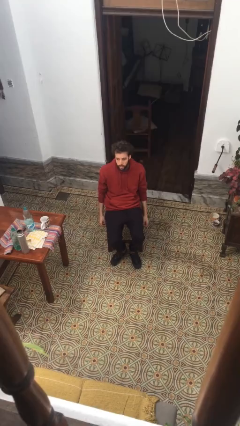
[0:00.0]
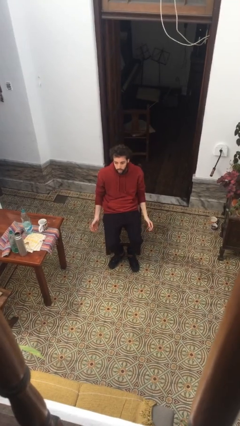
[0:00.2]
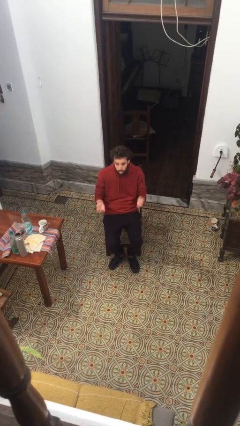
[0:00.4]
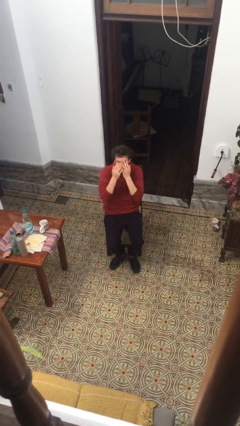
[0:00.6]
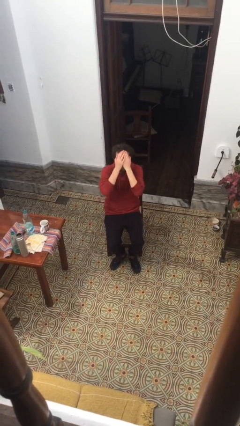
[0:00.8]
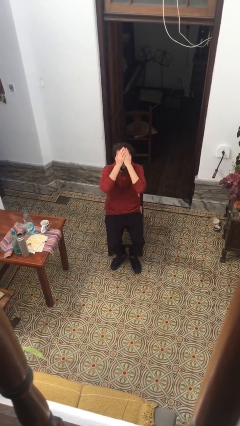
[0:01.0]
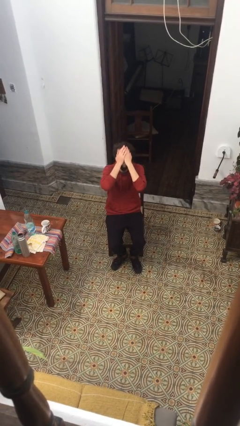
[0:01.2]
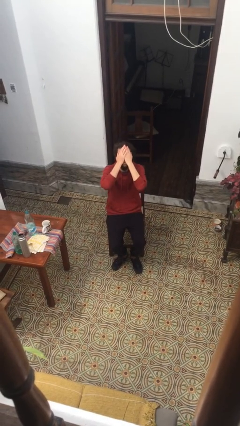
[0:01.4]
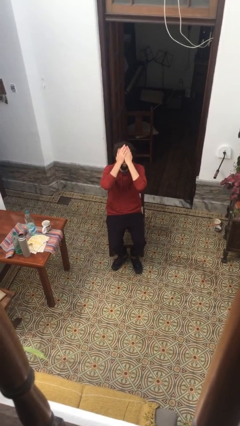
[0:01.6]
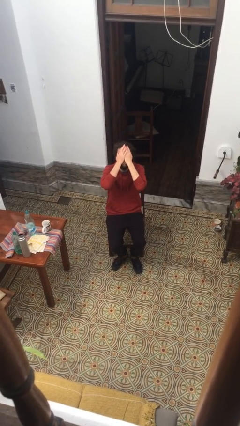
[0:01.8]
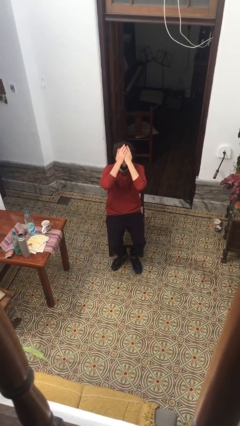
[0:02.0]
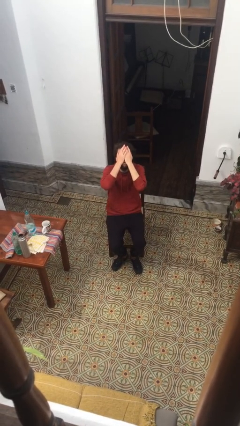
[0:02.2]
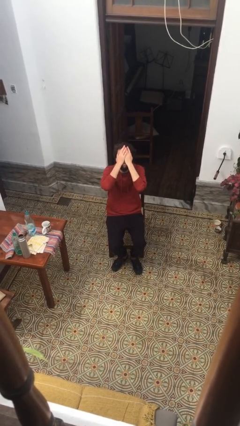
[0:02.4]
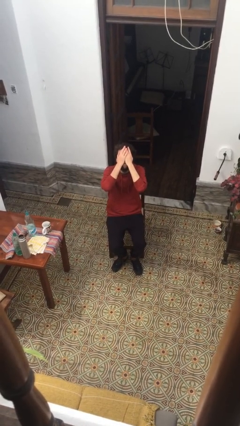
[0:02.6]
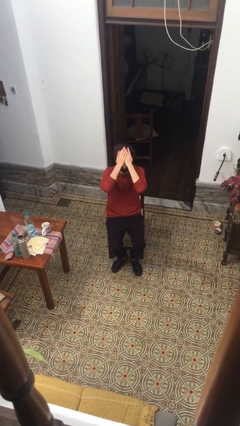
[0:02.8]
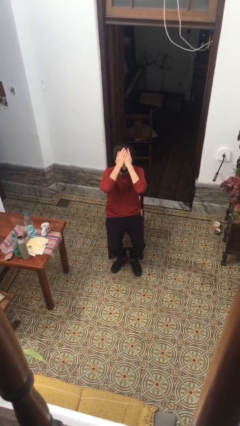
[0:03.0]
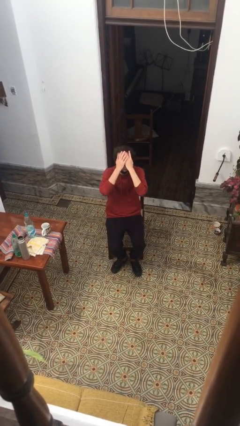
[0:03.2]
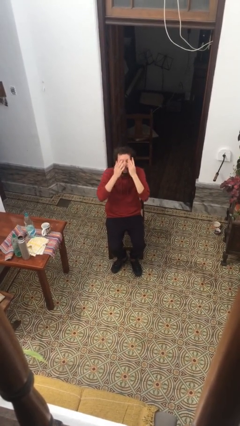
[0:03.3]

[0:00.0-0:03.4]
person covers face with hands

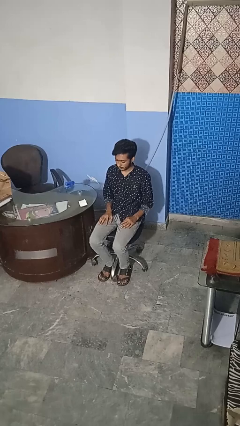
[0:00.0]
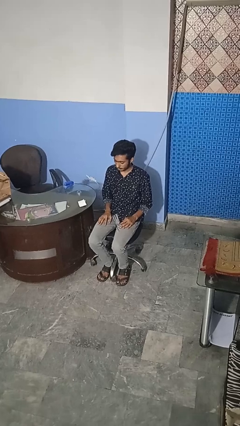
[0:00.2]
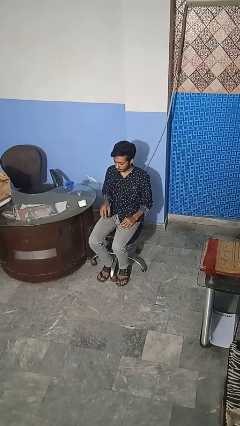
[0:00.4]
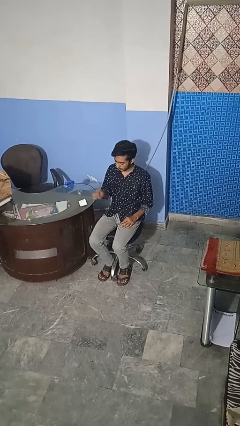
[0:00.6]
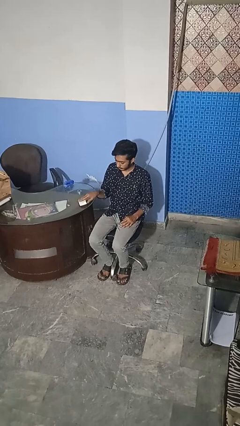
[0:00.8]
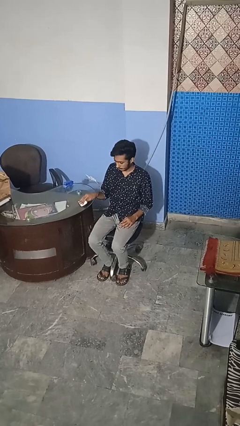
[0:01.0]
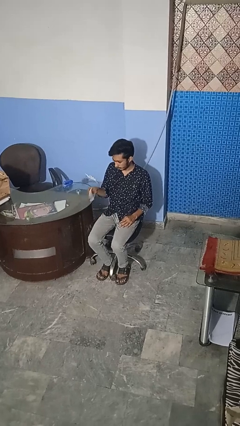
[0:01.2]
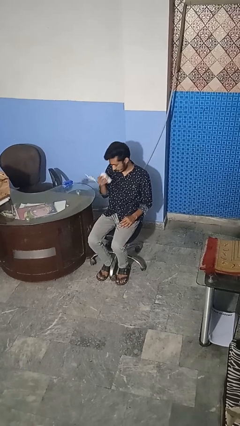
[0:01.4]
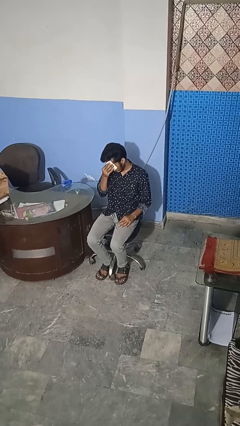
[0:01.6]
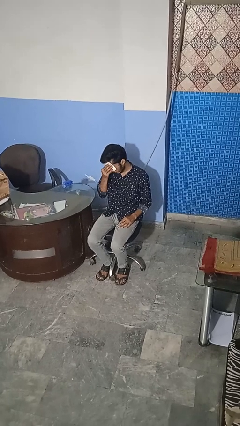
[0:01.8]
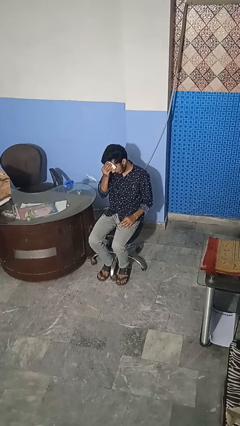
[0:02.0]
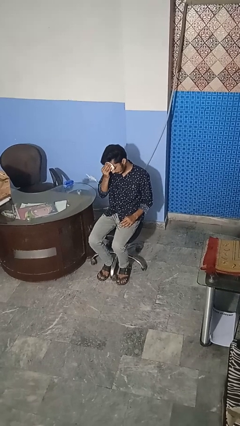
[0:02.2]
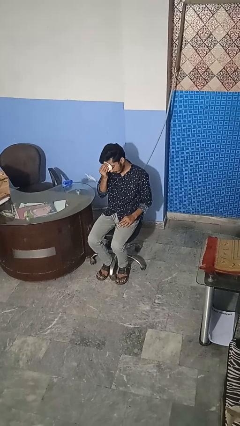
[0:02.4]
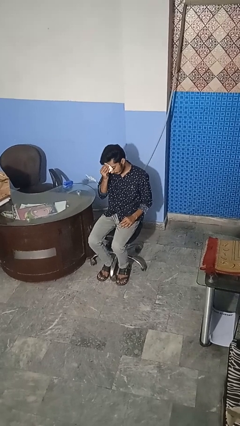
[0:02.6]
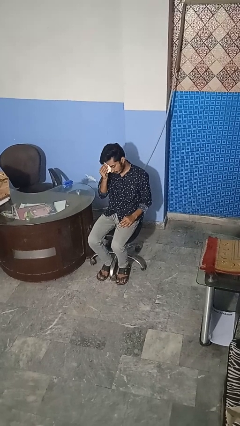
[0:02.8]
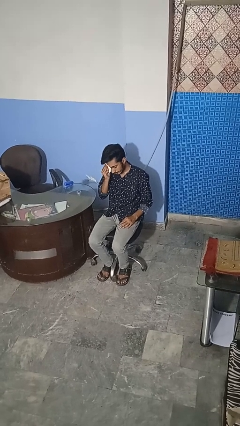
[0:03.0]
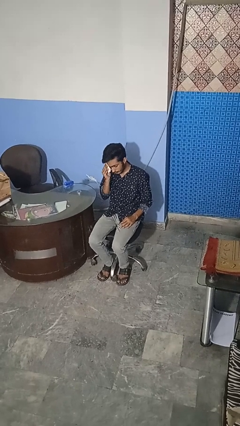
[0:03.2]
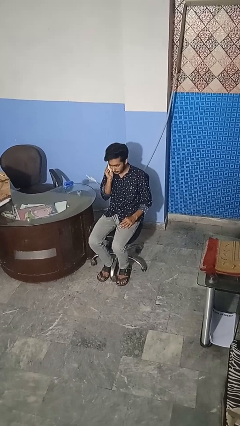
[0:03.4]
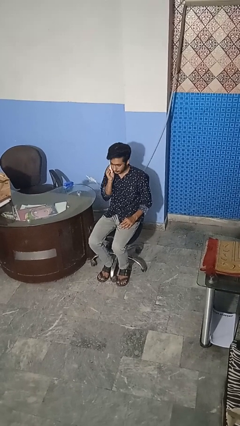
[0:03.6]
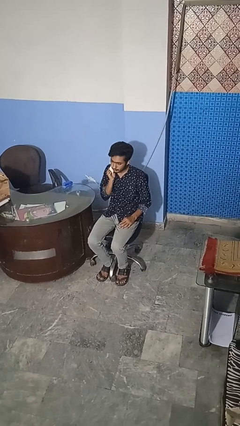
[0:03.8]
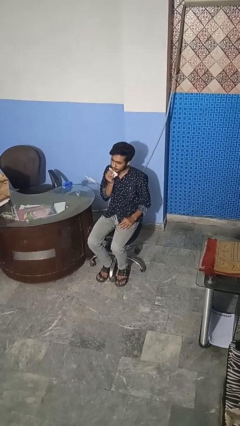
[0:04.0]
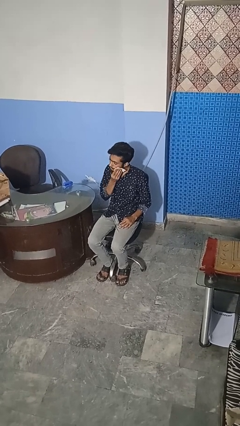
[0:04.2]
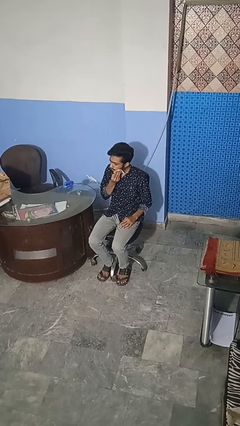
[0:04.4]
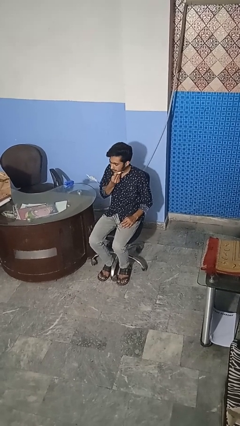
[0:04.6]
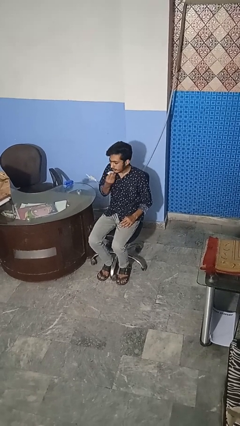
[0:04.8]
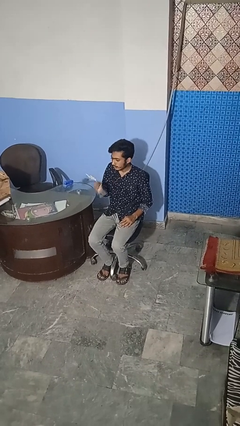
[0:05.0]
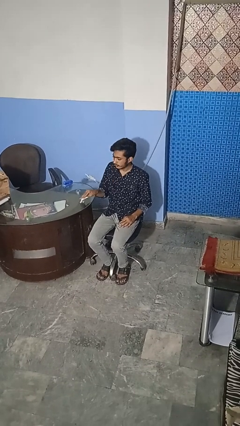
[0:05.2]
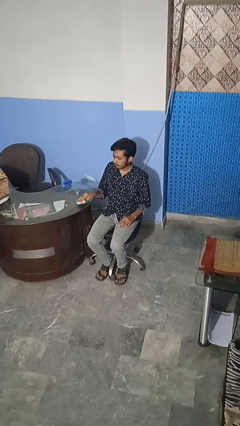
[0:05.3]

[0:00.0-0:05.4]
person wipes mouth with napkin

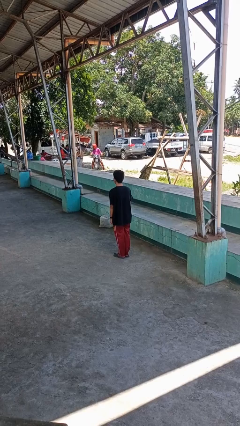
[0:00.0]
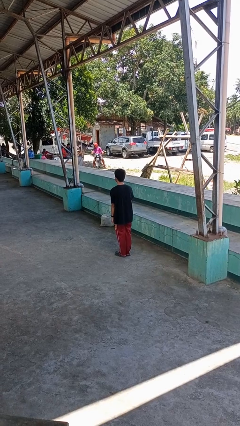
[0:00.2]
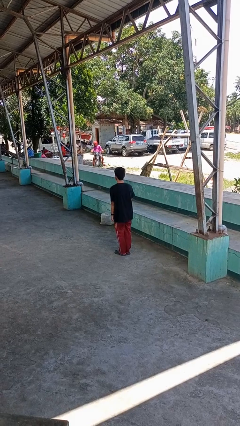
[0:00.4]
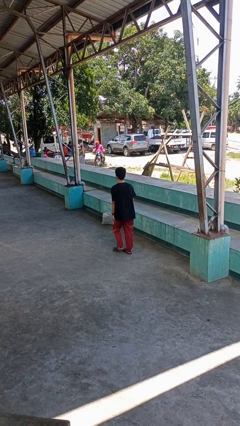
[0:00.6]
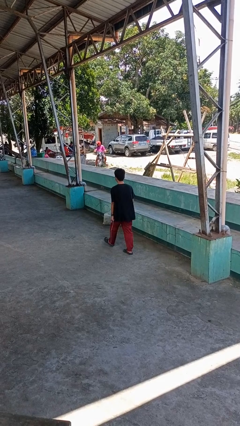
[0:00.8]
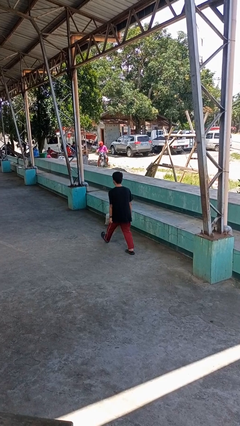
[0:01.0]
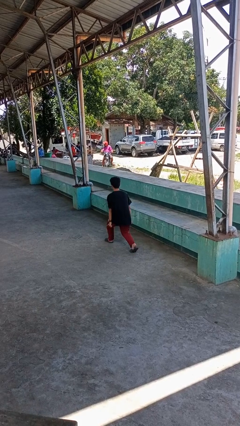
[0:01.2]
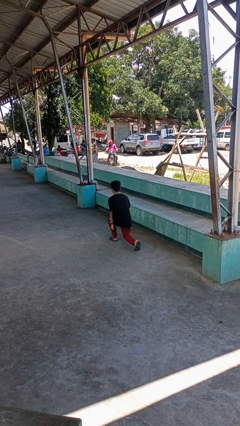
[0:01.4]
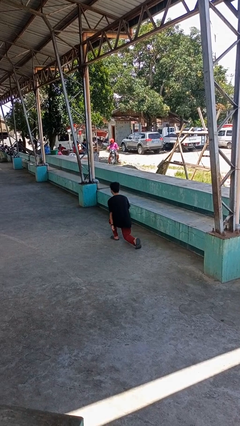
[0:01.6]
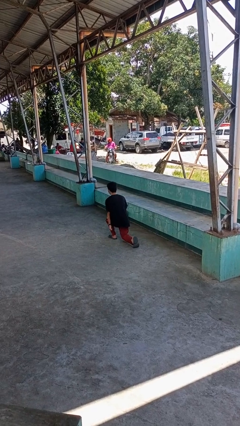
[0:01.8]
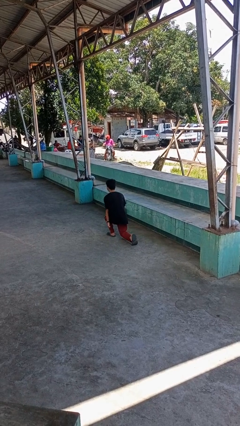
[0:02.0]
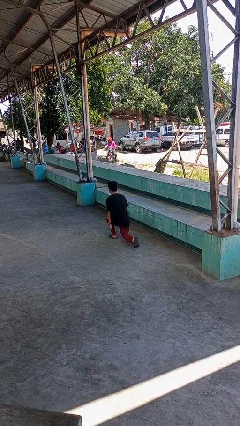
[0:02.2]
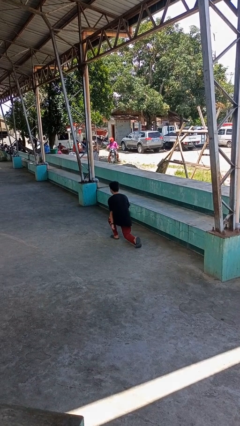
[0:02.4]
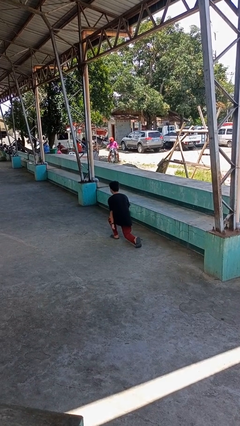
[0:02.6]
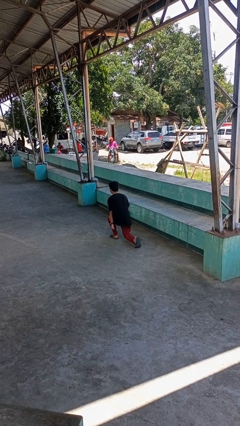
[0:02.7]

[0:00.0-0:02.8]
person exercises with lunges

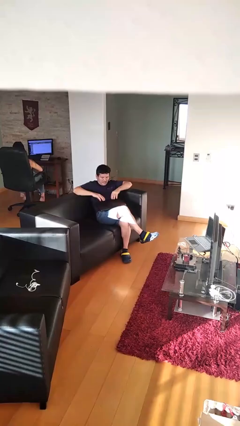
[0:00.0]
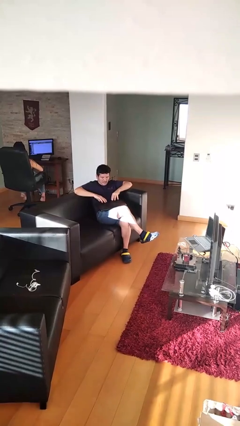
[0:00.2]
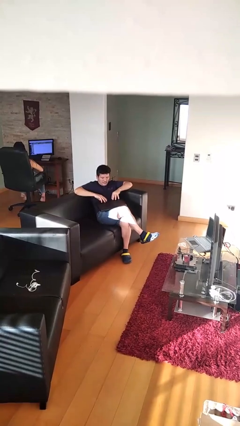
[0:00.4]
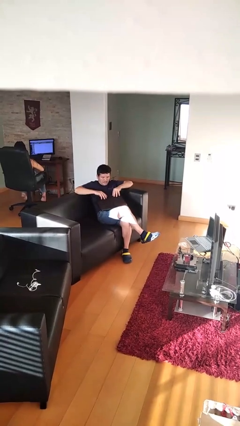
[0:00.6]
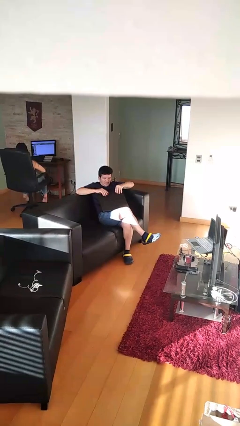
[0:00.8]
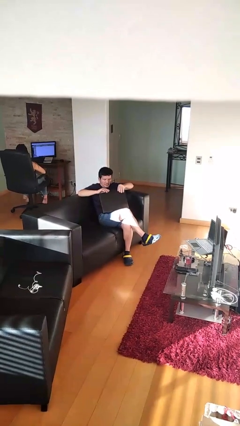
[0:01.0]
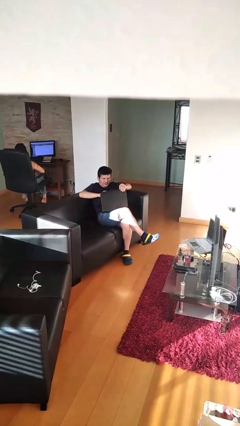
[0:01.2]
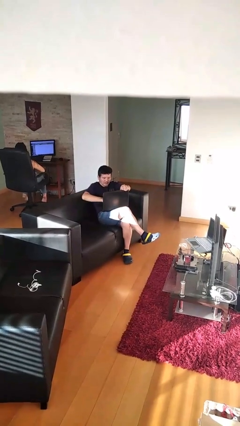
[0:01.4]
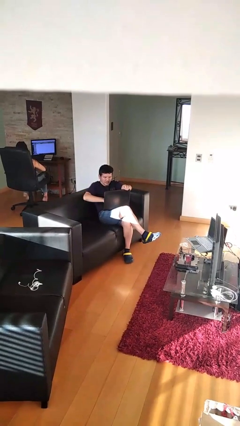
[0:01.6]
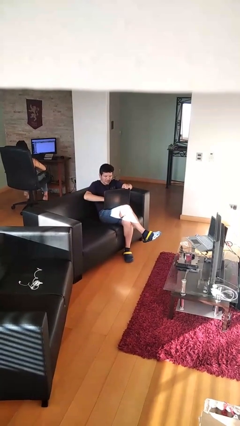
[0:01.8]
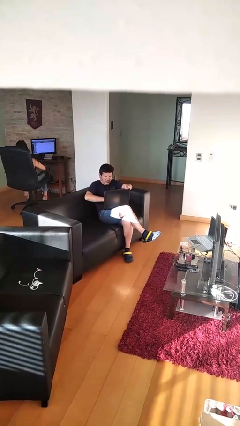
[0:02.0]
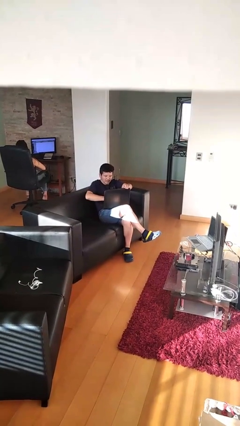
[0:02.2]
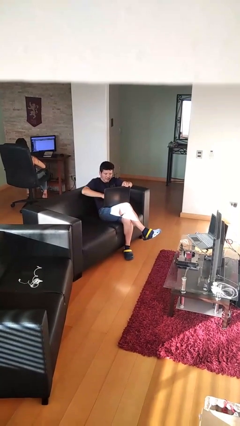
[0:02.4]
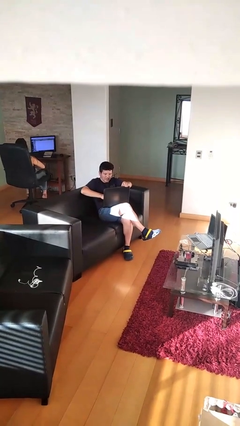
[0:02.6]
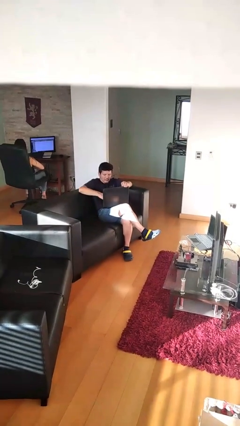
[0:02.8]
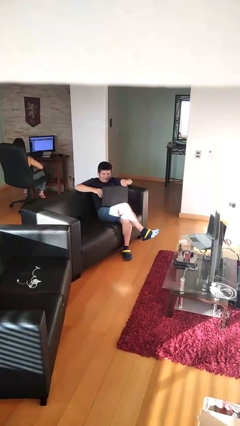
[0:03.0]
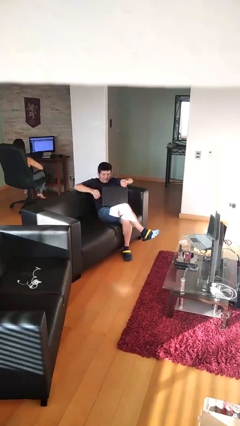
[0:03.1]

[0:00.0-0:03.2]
person interacts with laptop

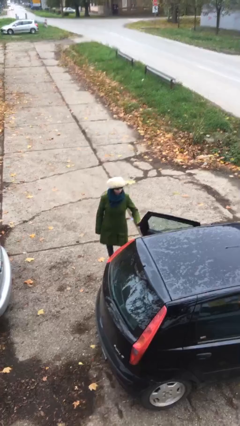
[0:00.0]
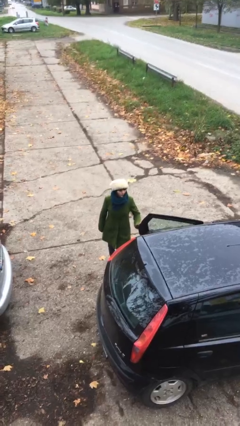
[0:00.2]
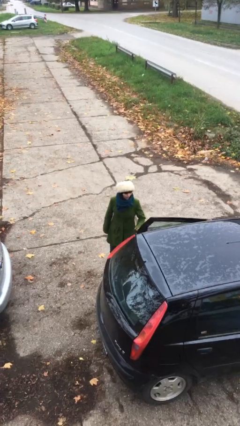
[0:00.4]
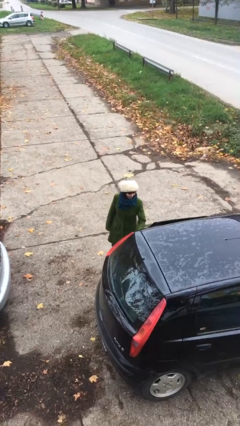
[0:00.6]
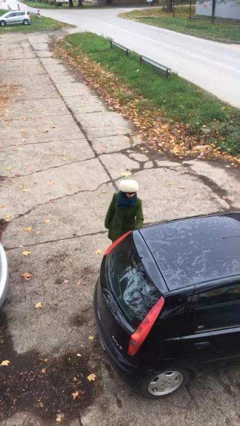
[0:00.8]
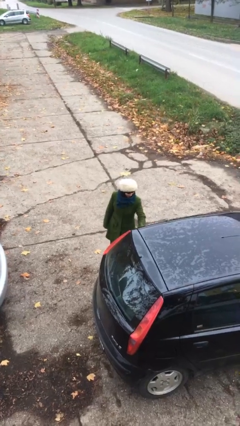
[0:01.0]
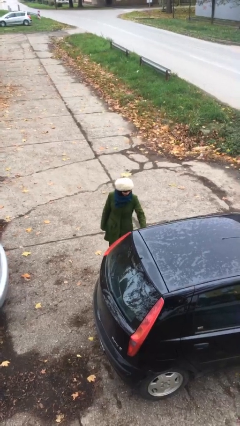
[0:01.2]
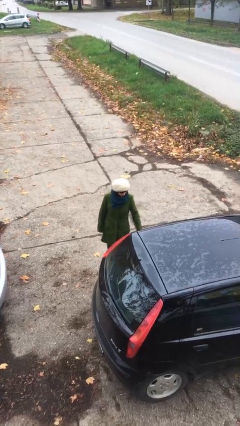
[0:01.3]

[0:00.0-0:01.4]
person closes car door

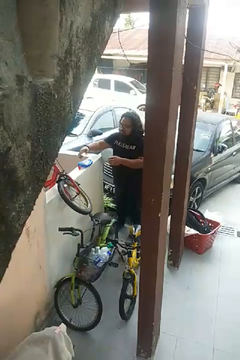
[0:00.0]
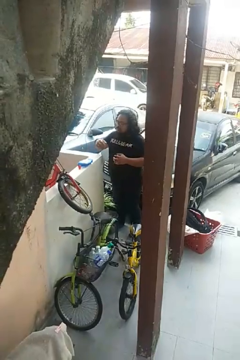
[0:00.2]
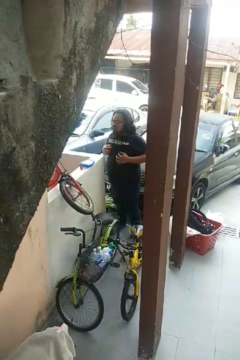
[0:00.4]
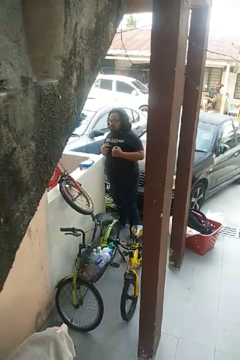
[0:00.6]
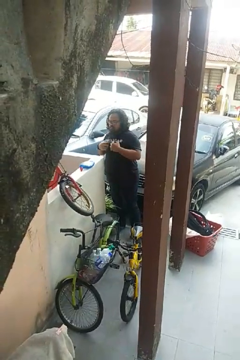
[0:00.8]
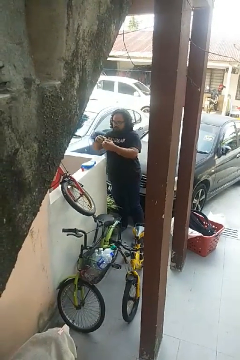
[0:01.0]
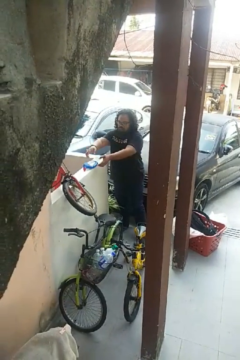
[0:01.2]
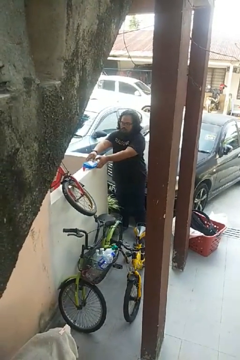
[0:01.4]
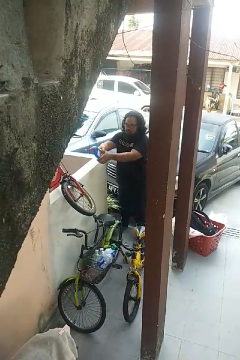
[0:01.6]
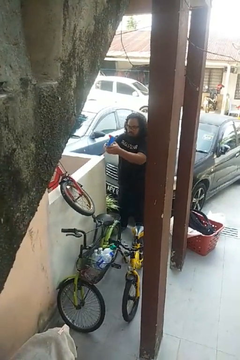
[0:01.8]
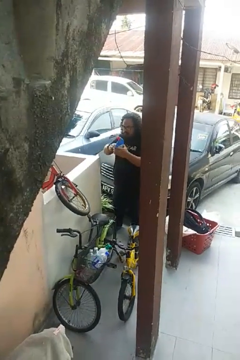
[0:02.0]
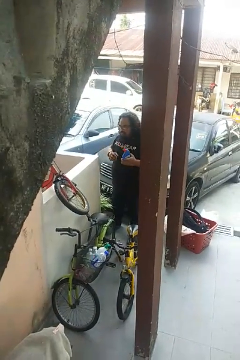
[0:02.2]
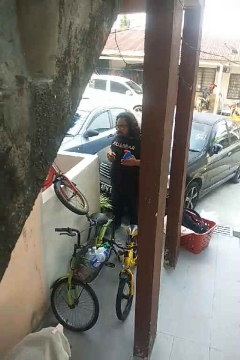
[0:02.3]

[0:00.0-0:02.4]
person picks up object from countertop
